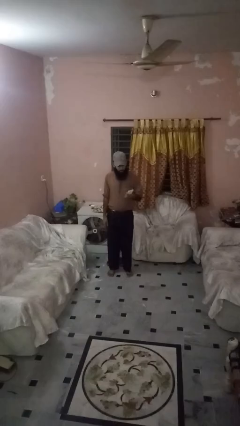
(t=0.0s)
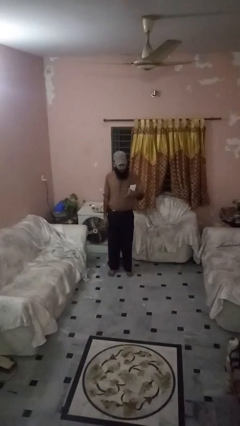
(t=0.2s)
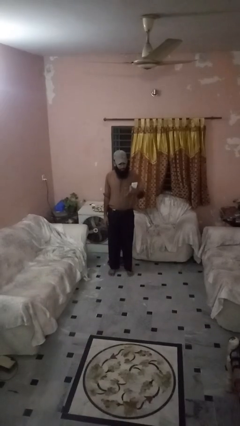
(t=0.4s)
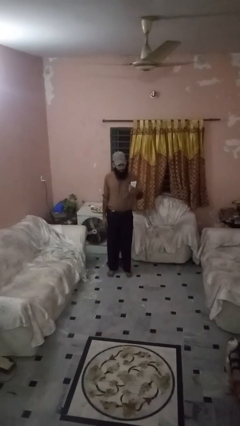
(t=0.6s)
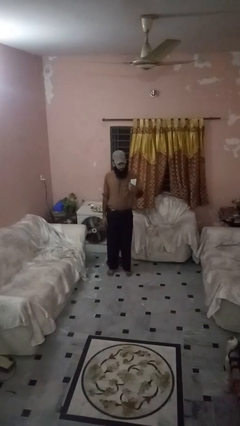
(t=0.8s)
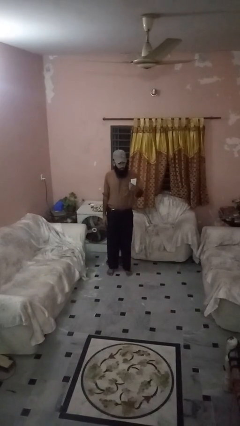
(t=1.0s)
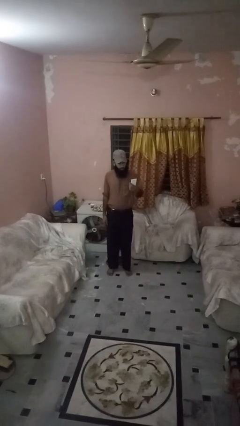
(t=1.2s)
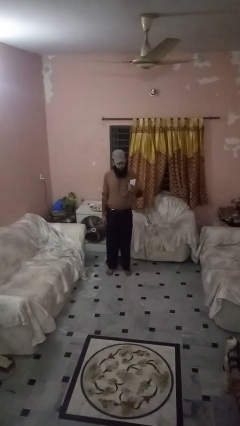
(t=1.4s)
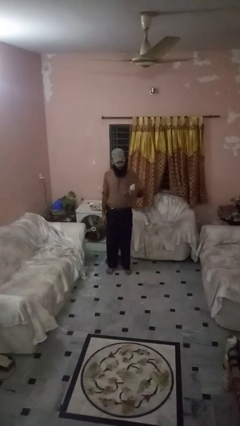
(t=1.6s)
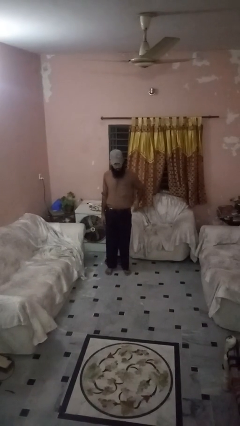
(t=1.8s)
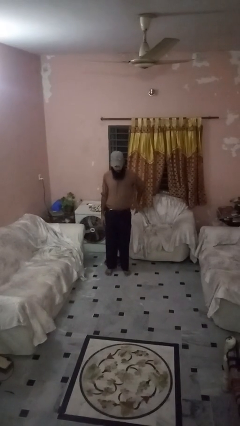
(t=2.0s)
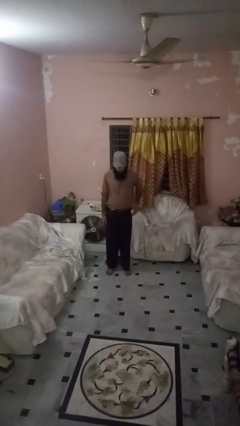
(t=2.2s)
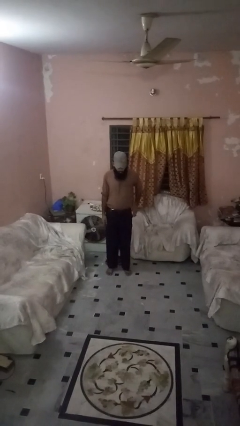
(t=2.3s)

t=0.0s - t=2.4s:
person puts phone into pocket

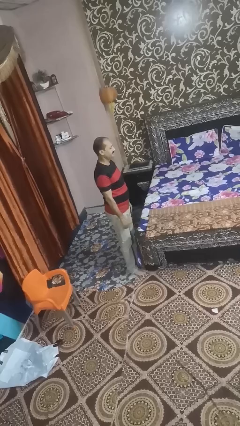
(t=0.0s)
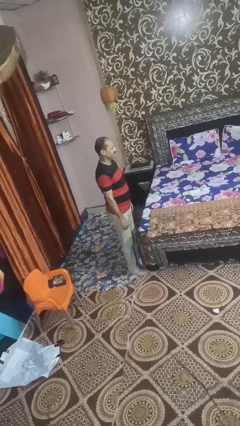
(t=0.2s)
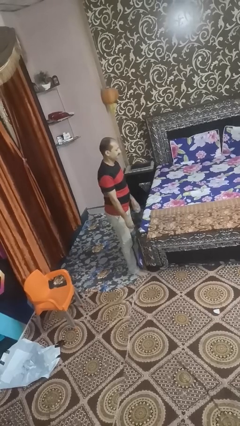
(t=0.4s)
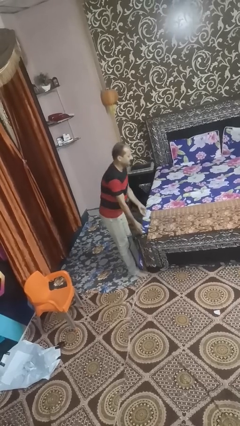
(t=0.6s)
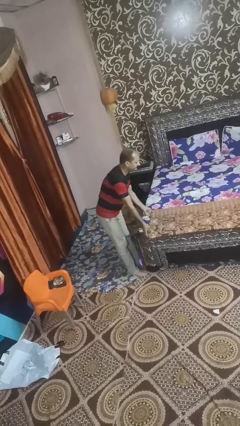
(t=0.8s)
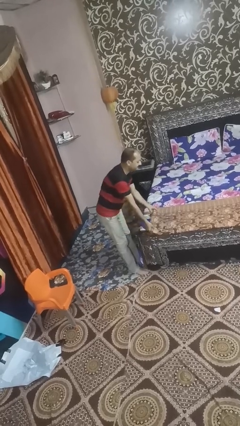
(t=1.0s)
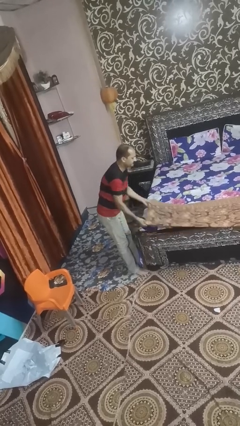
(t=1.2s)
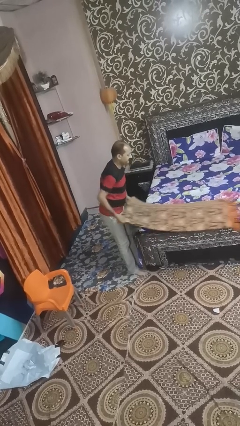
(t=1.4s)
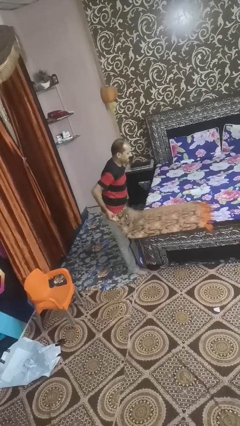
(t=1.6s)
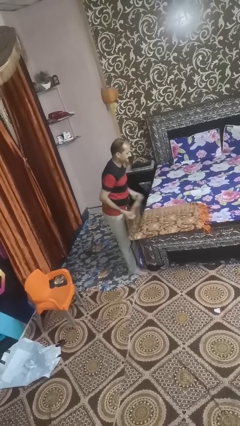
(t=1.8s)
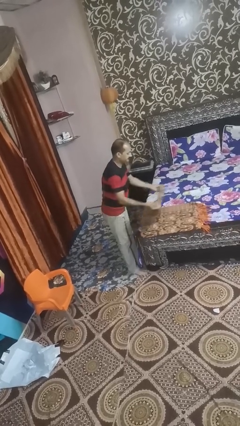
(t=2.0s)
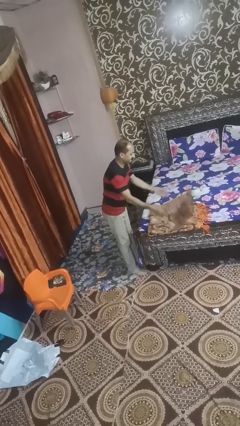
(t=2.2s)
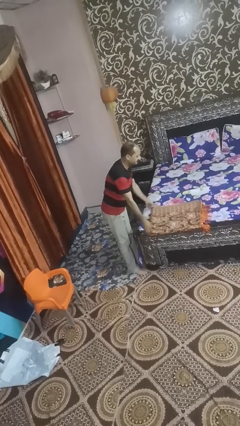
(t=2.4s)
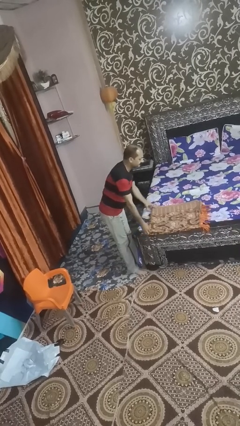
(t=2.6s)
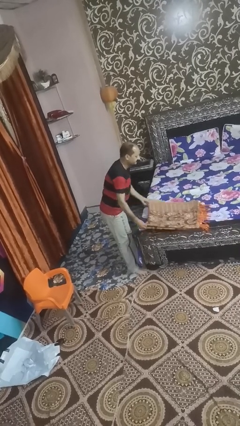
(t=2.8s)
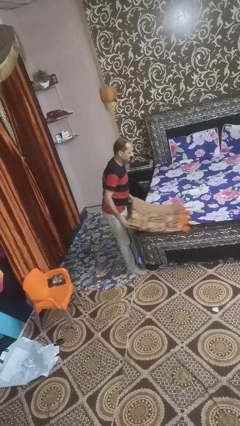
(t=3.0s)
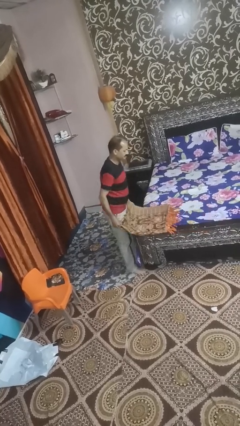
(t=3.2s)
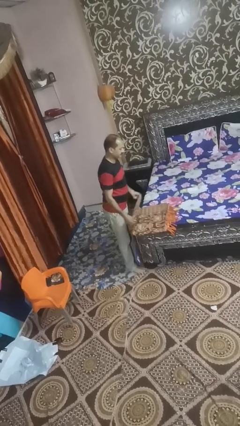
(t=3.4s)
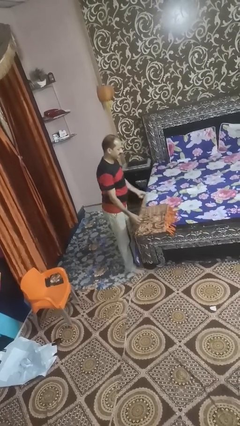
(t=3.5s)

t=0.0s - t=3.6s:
person folds blanket

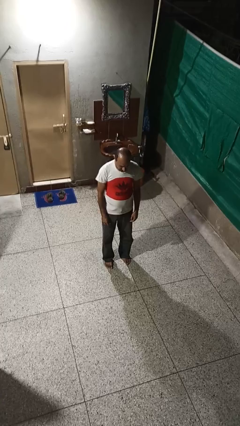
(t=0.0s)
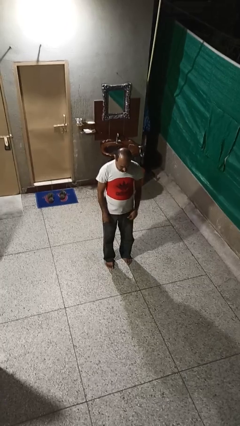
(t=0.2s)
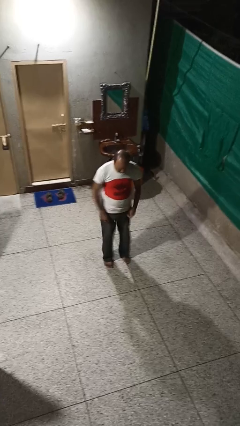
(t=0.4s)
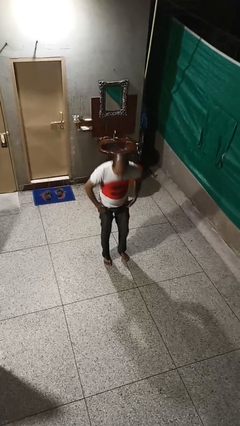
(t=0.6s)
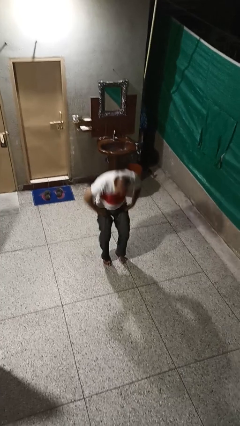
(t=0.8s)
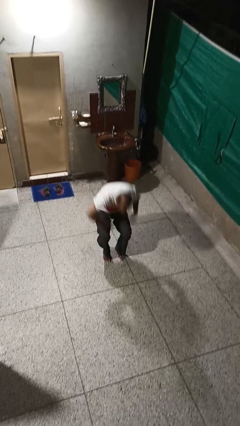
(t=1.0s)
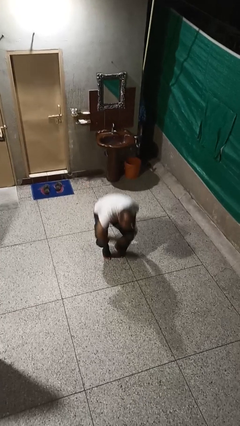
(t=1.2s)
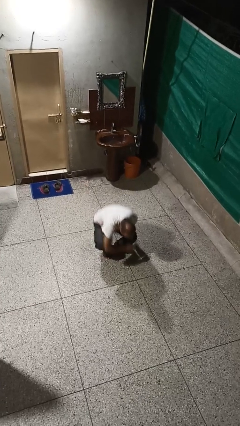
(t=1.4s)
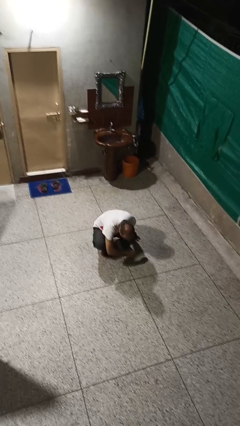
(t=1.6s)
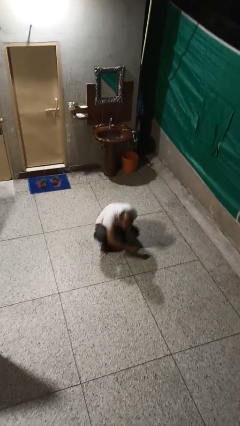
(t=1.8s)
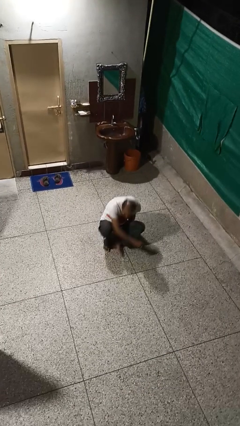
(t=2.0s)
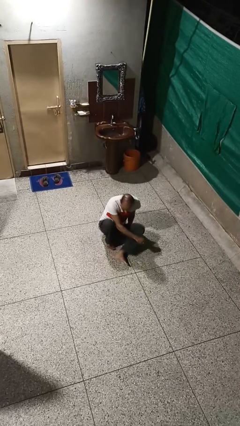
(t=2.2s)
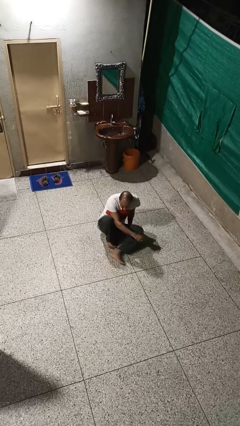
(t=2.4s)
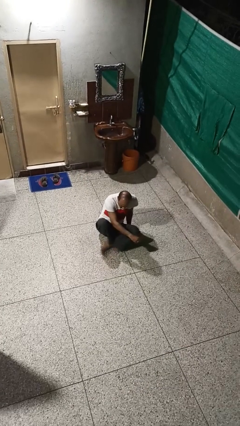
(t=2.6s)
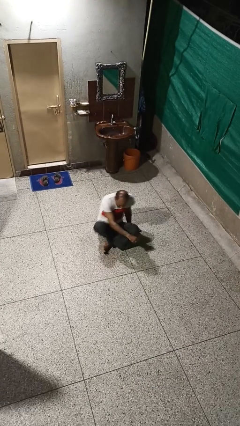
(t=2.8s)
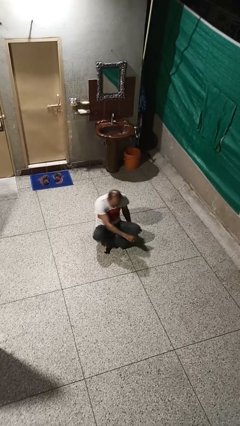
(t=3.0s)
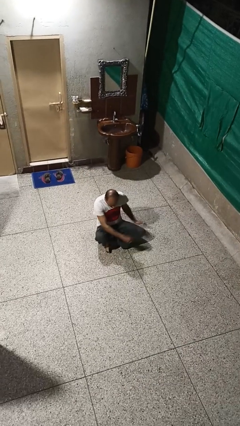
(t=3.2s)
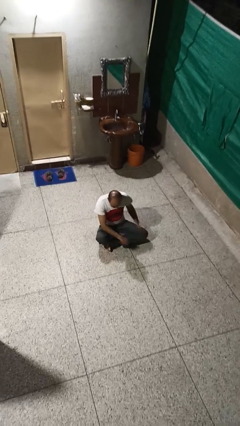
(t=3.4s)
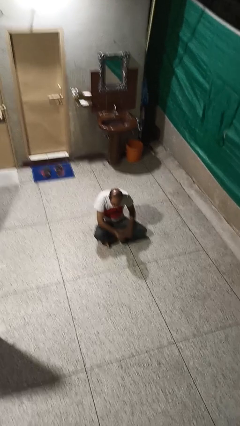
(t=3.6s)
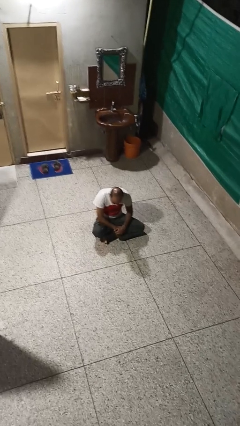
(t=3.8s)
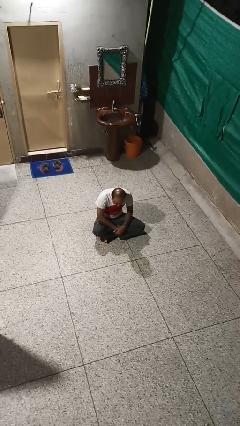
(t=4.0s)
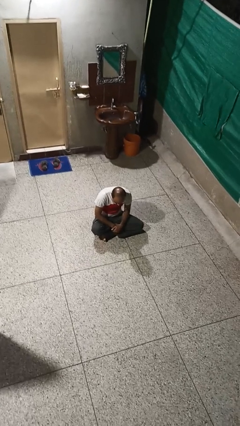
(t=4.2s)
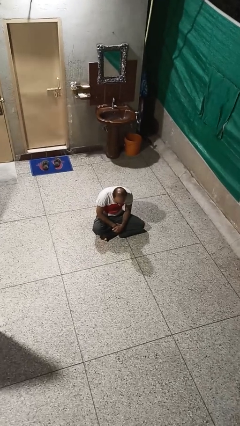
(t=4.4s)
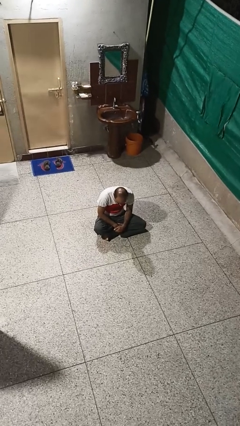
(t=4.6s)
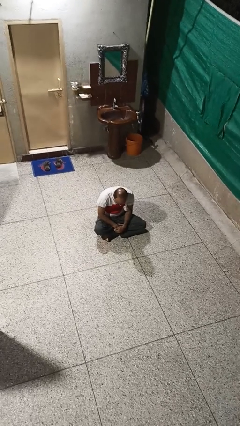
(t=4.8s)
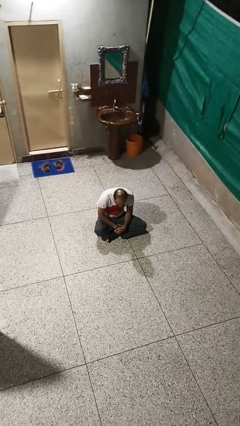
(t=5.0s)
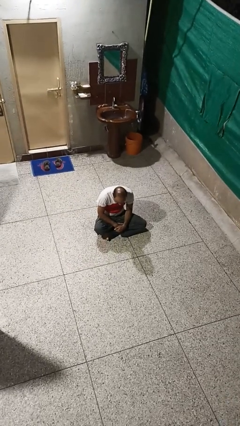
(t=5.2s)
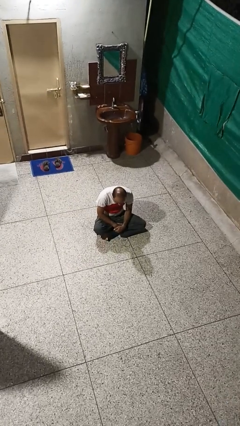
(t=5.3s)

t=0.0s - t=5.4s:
person sits crisscross

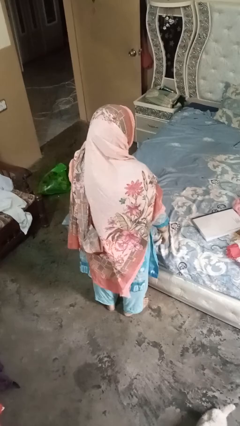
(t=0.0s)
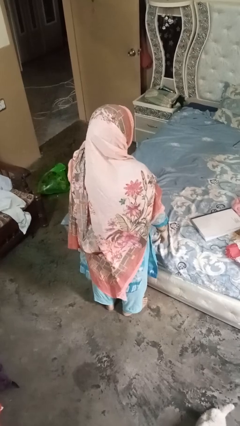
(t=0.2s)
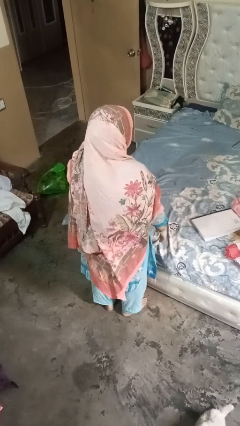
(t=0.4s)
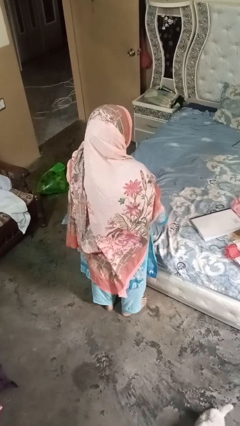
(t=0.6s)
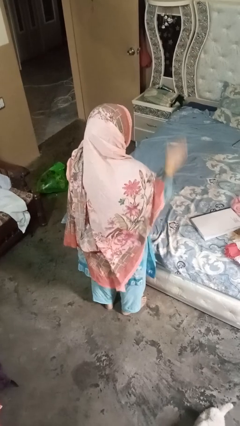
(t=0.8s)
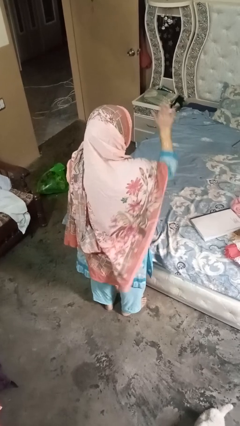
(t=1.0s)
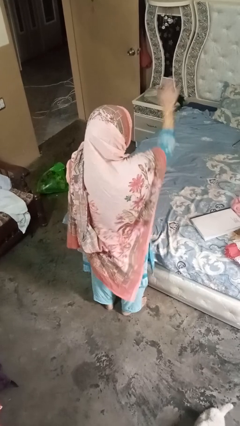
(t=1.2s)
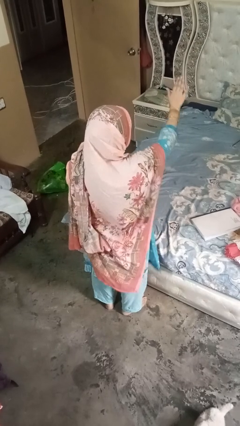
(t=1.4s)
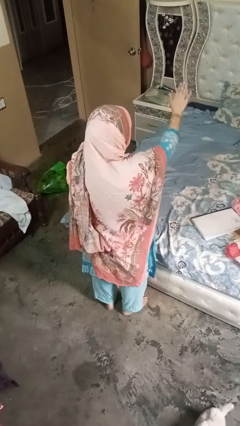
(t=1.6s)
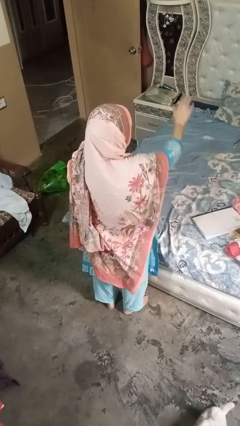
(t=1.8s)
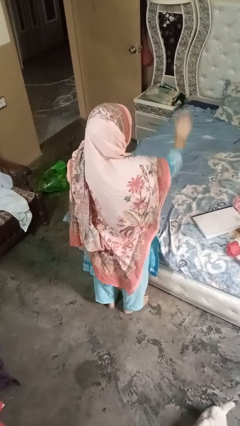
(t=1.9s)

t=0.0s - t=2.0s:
person gestures stop

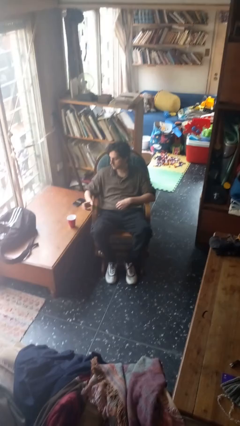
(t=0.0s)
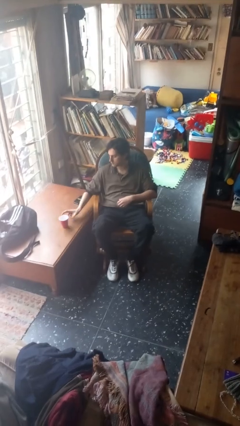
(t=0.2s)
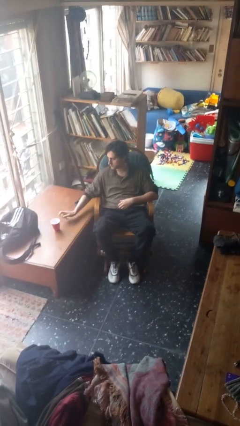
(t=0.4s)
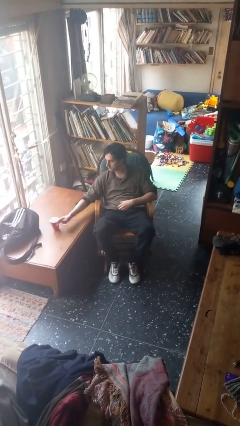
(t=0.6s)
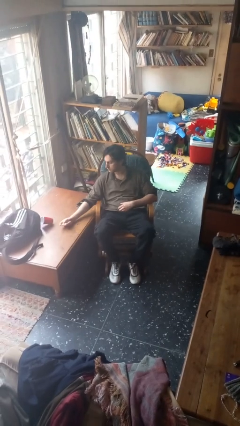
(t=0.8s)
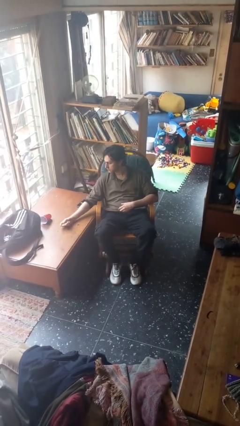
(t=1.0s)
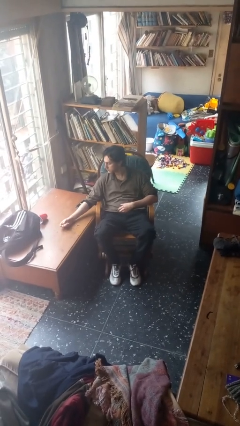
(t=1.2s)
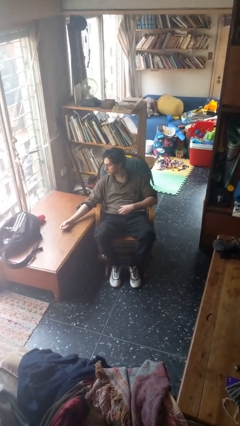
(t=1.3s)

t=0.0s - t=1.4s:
person knocks over glass

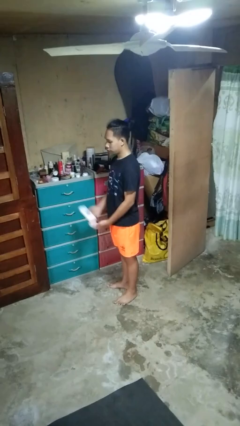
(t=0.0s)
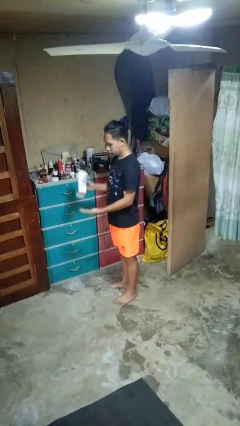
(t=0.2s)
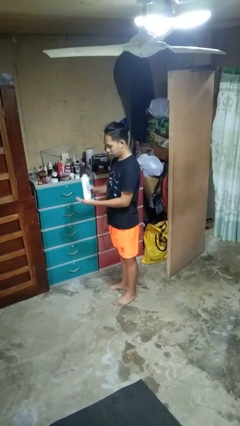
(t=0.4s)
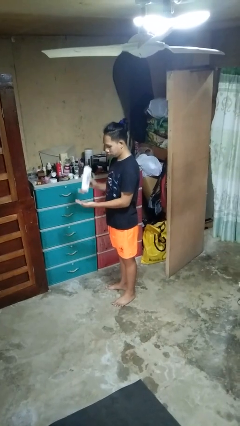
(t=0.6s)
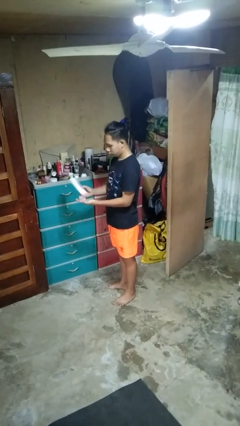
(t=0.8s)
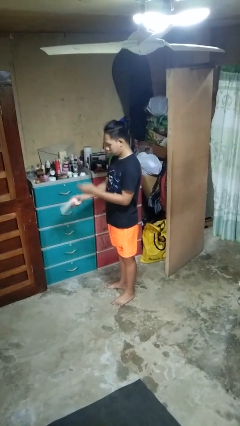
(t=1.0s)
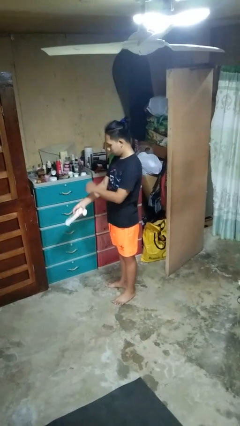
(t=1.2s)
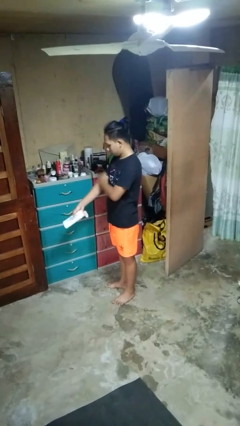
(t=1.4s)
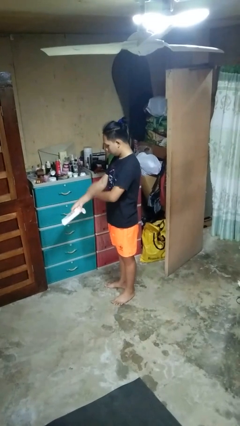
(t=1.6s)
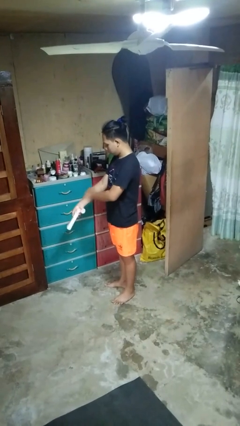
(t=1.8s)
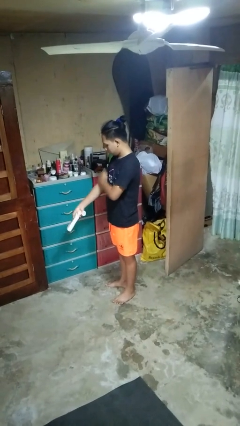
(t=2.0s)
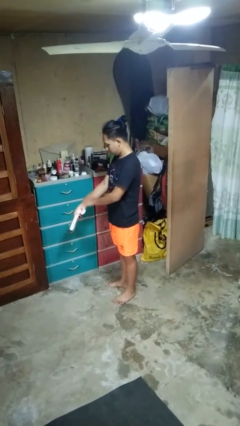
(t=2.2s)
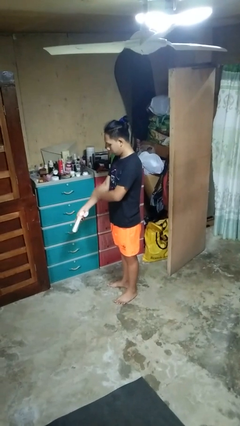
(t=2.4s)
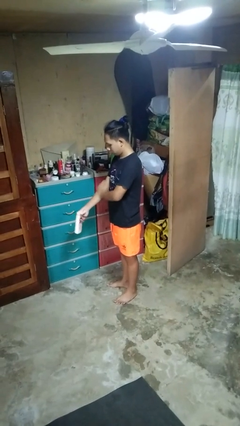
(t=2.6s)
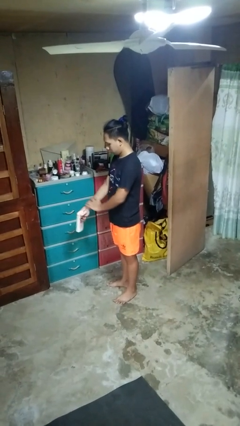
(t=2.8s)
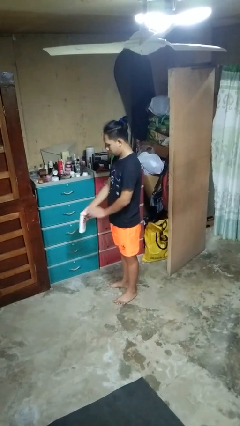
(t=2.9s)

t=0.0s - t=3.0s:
person applies sunscreen
